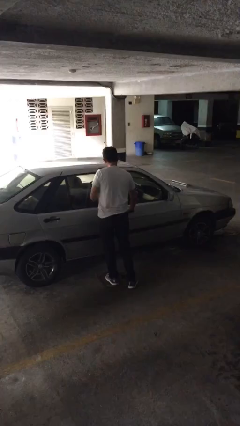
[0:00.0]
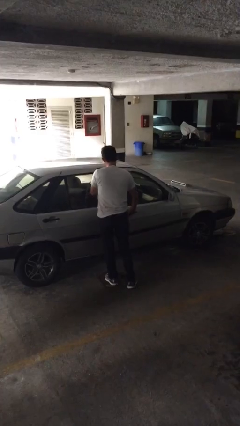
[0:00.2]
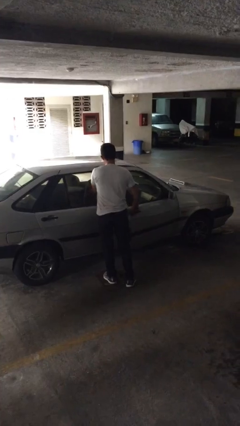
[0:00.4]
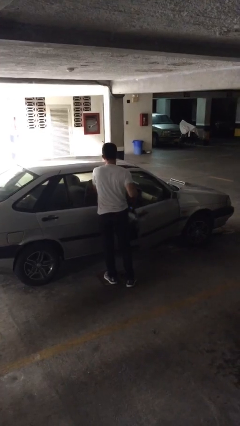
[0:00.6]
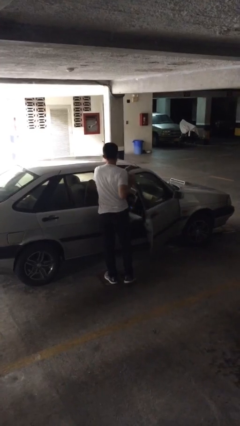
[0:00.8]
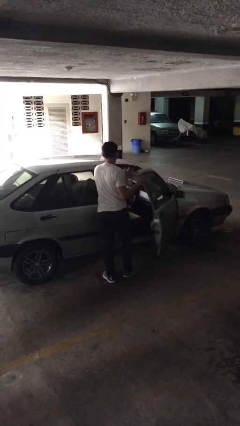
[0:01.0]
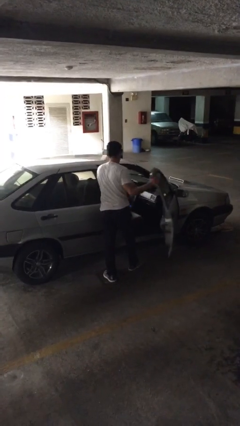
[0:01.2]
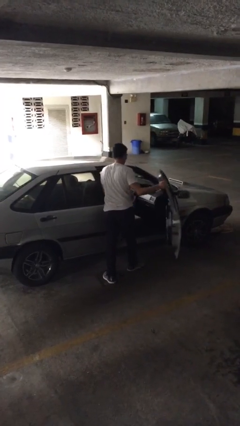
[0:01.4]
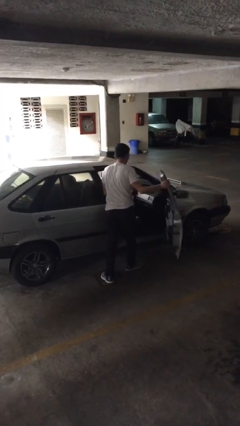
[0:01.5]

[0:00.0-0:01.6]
person opens car door

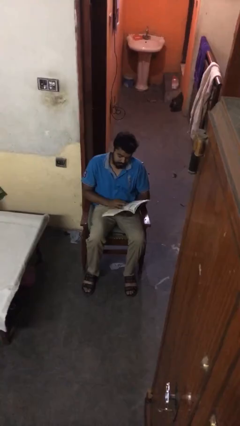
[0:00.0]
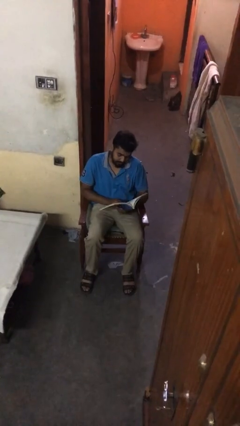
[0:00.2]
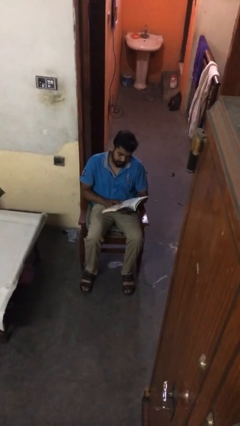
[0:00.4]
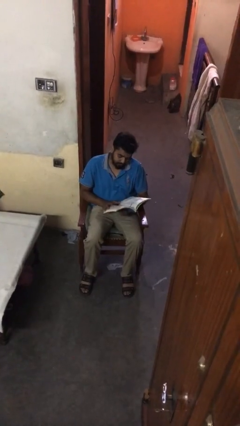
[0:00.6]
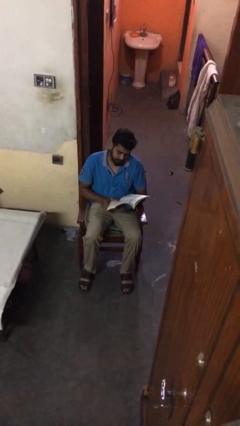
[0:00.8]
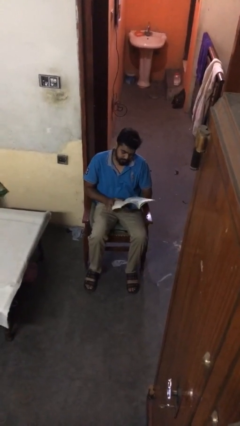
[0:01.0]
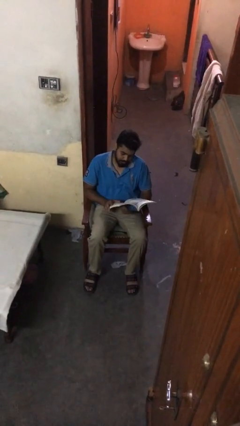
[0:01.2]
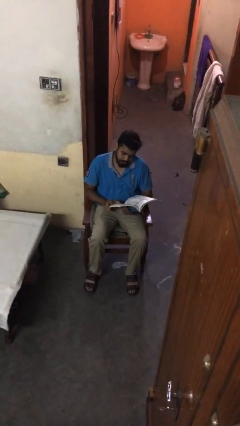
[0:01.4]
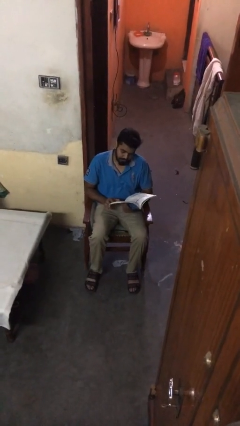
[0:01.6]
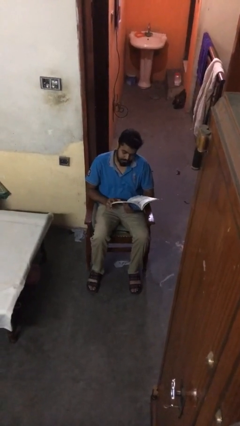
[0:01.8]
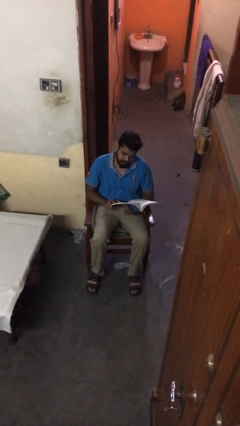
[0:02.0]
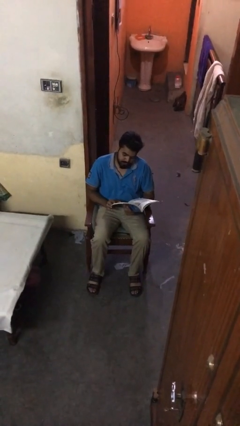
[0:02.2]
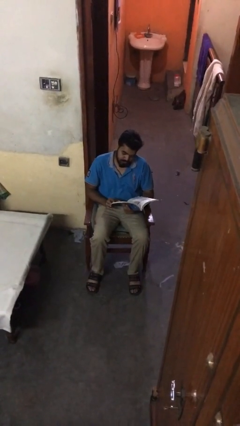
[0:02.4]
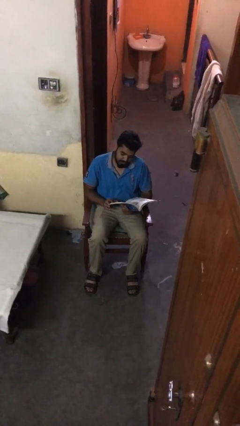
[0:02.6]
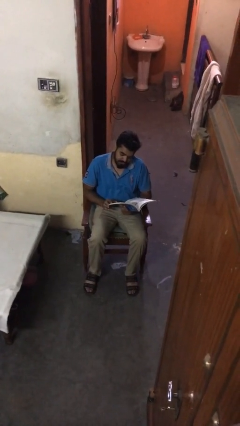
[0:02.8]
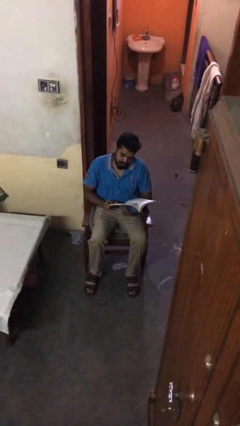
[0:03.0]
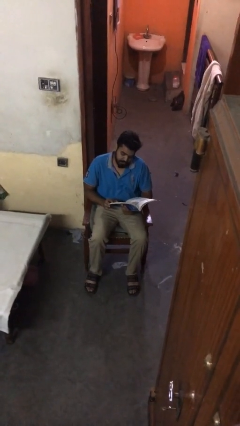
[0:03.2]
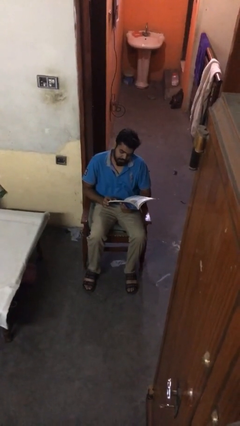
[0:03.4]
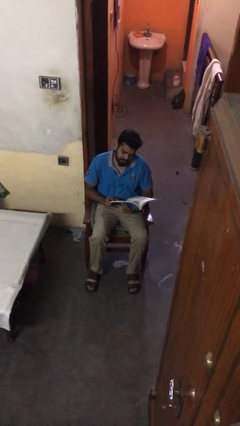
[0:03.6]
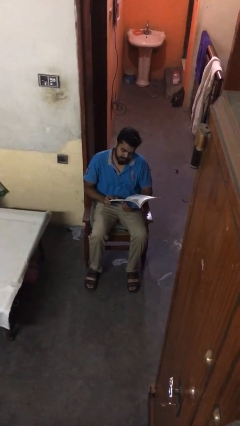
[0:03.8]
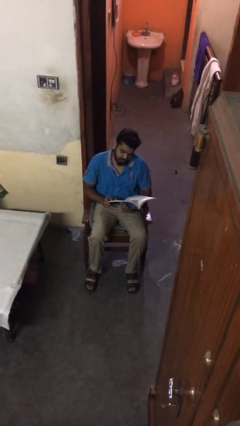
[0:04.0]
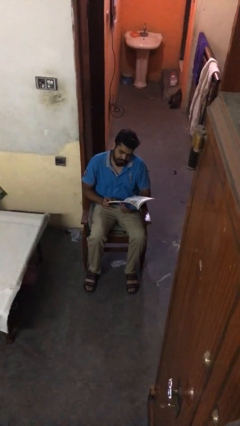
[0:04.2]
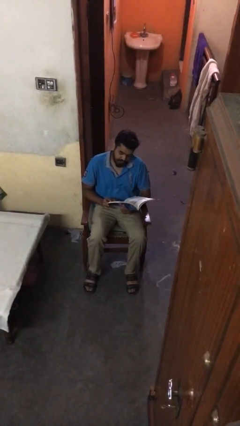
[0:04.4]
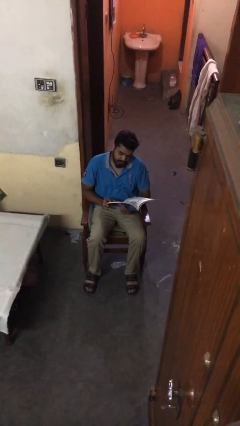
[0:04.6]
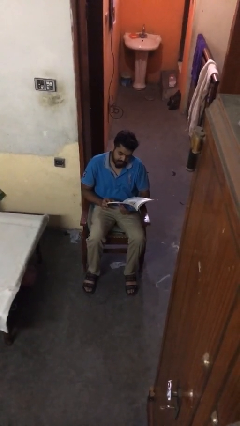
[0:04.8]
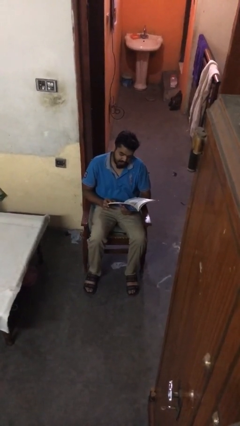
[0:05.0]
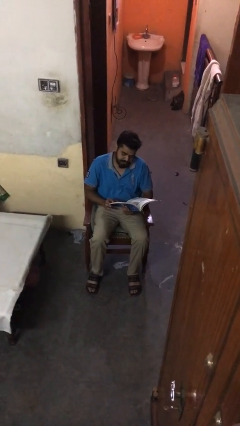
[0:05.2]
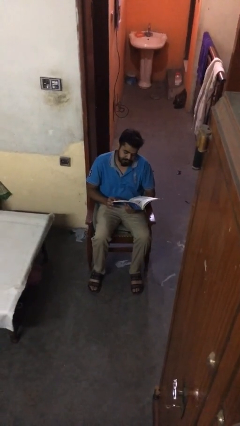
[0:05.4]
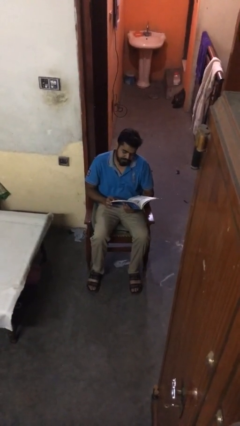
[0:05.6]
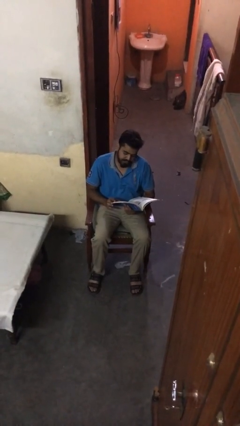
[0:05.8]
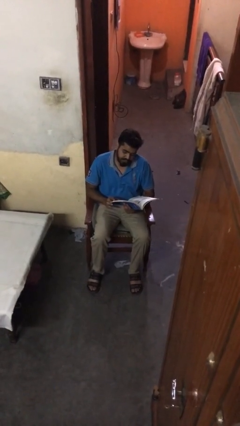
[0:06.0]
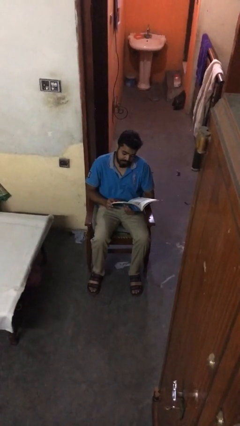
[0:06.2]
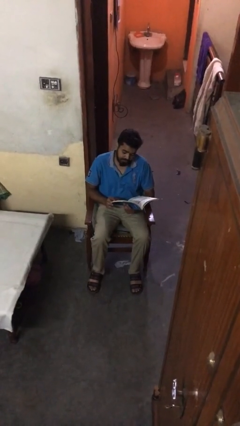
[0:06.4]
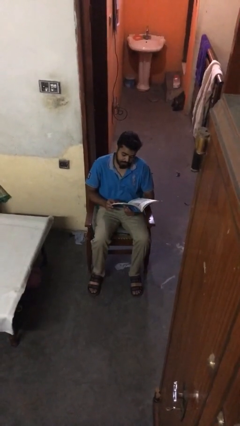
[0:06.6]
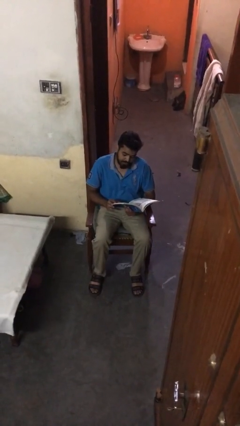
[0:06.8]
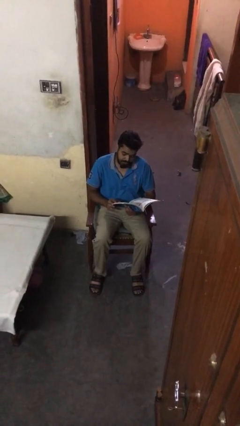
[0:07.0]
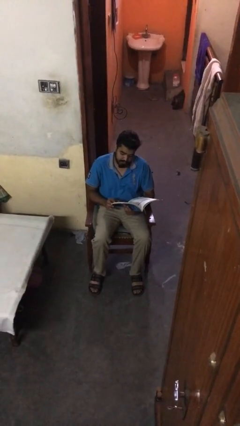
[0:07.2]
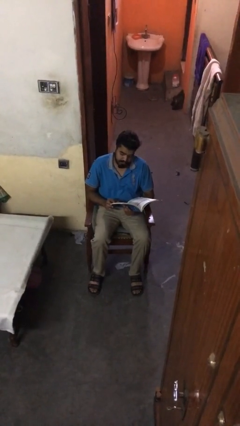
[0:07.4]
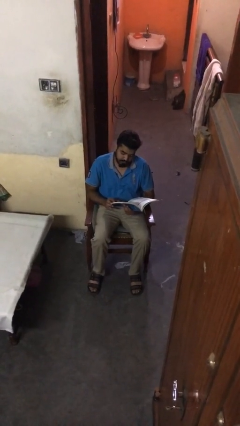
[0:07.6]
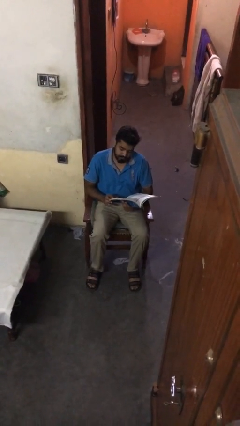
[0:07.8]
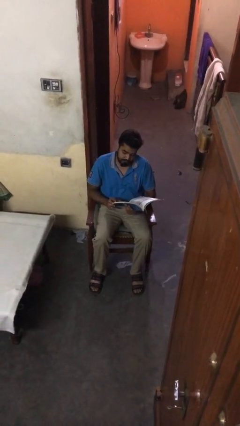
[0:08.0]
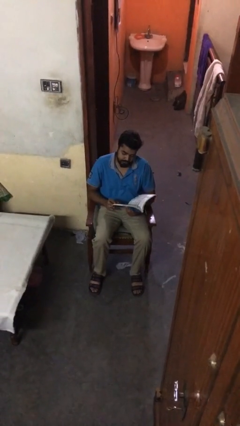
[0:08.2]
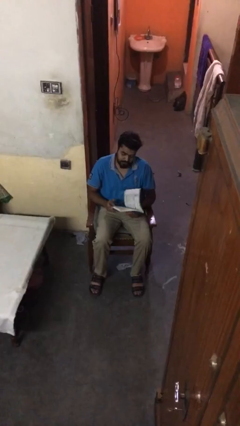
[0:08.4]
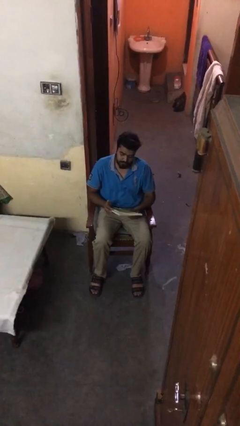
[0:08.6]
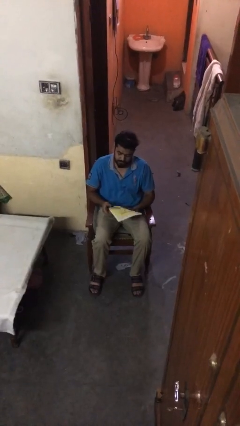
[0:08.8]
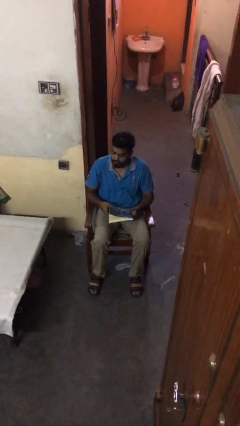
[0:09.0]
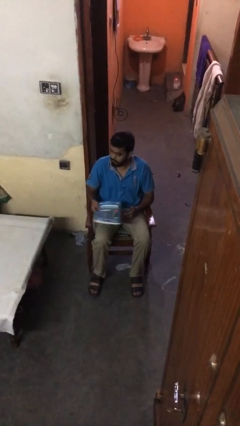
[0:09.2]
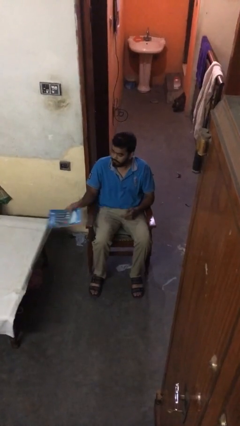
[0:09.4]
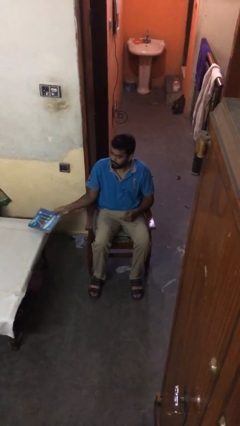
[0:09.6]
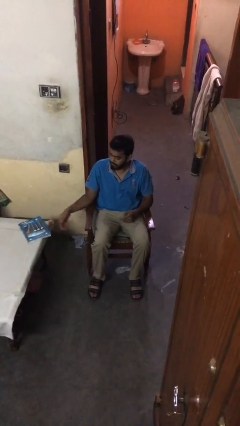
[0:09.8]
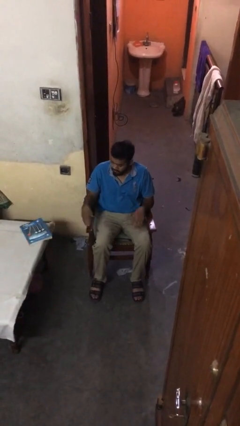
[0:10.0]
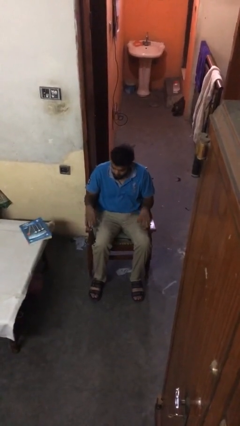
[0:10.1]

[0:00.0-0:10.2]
person reads document

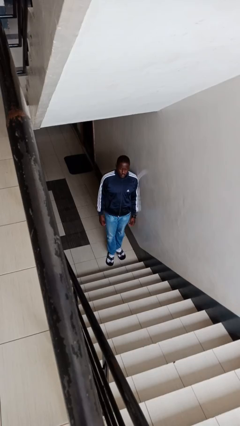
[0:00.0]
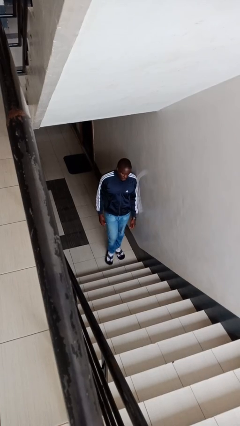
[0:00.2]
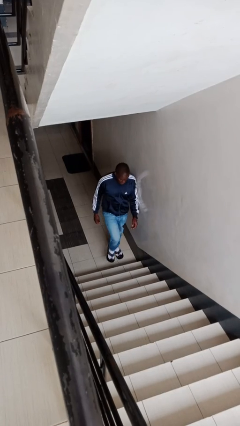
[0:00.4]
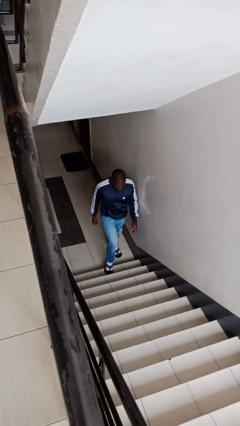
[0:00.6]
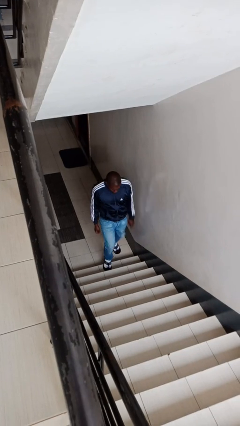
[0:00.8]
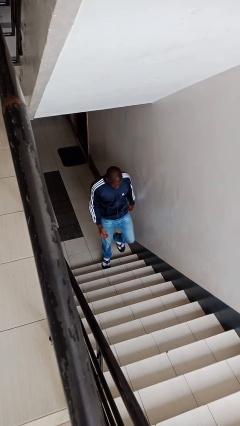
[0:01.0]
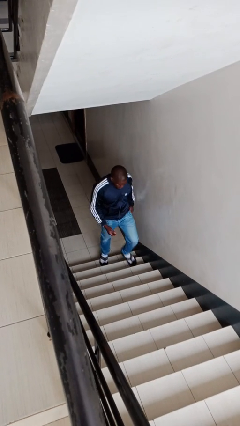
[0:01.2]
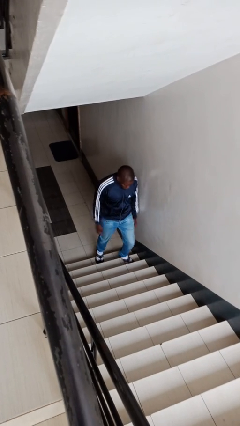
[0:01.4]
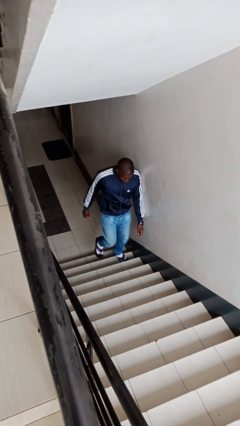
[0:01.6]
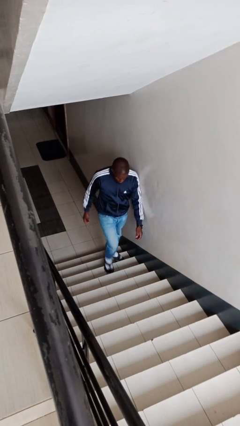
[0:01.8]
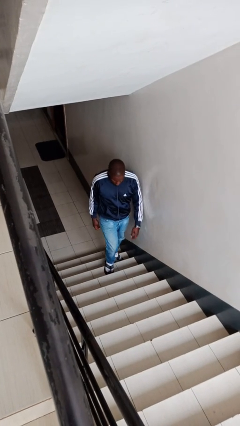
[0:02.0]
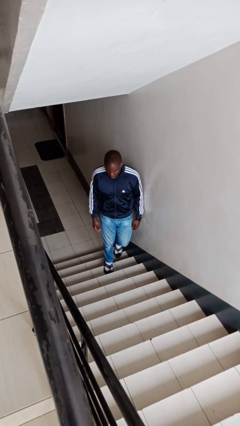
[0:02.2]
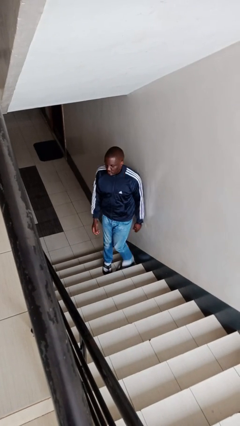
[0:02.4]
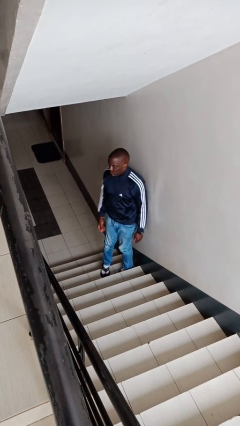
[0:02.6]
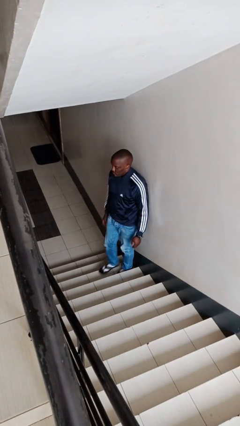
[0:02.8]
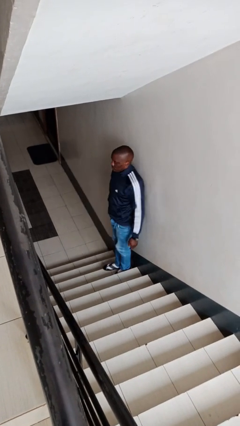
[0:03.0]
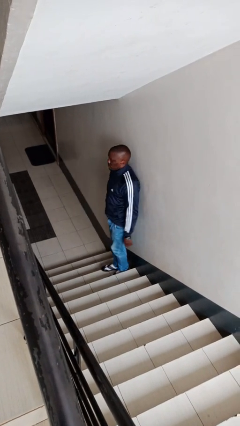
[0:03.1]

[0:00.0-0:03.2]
person climbs up stairs

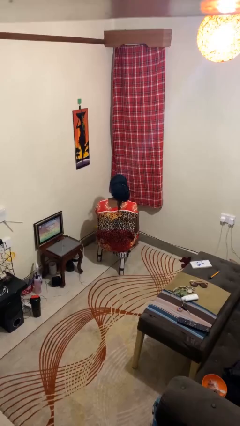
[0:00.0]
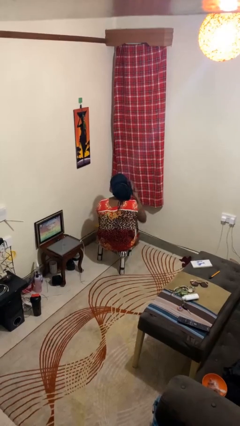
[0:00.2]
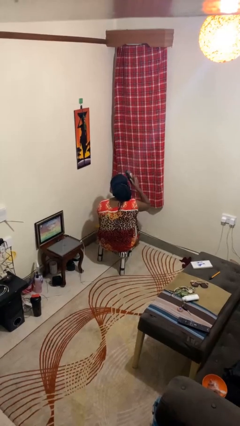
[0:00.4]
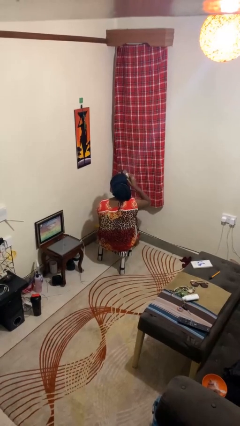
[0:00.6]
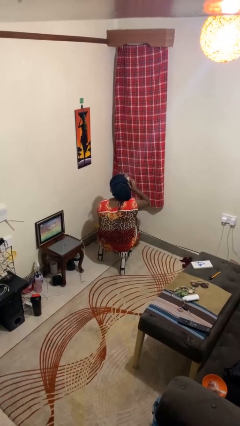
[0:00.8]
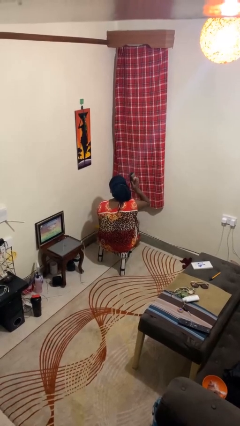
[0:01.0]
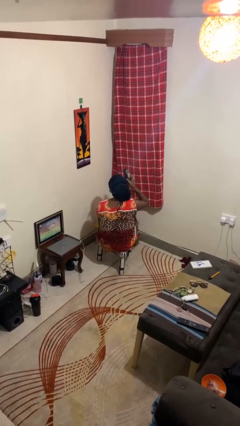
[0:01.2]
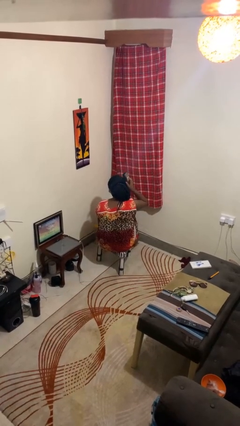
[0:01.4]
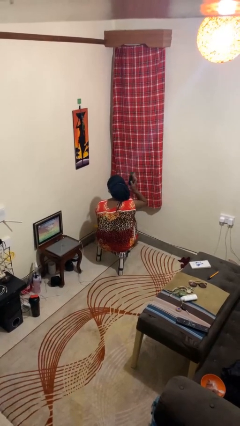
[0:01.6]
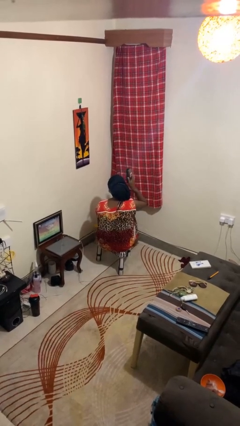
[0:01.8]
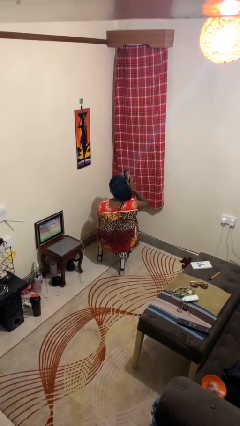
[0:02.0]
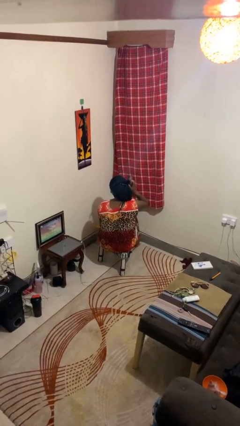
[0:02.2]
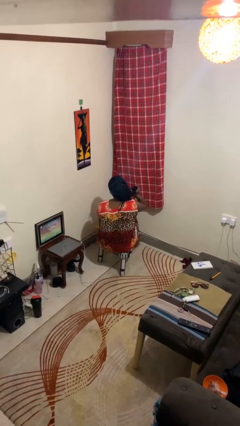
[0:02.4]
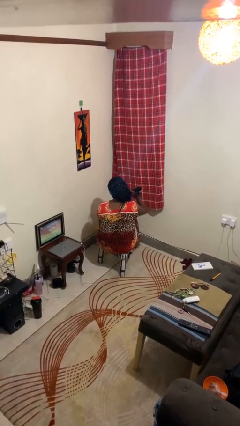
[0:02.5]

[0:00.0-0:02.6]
person brushes hair
